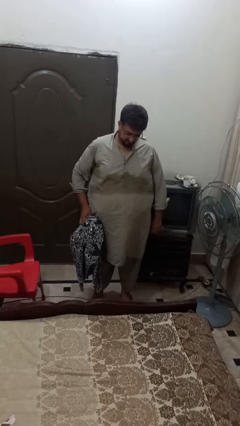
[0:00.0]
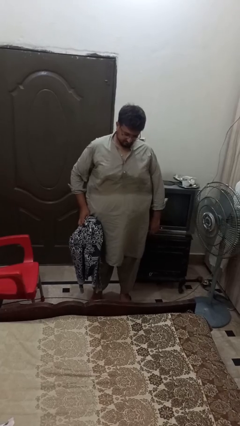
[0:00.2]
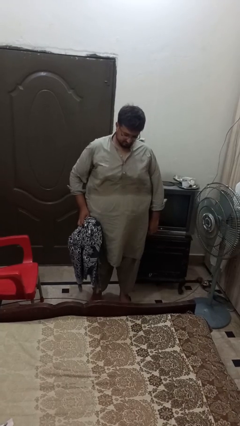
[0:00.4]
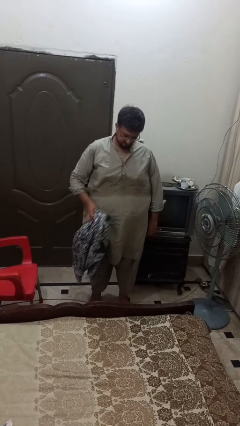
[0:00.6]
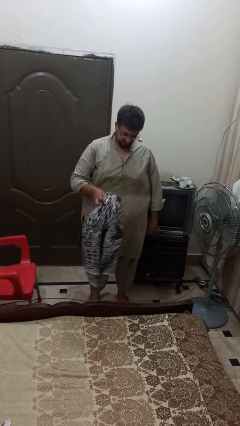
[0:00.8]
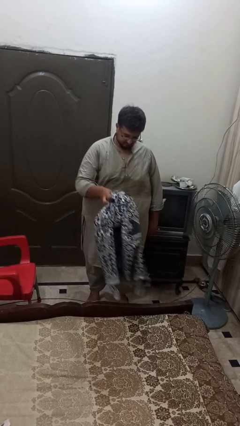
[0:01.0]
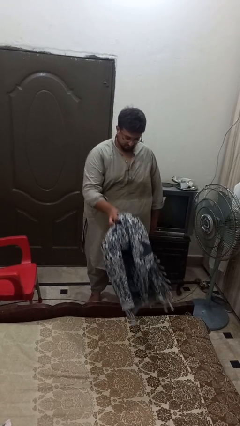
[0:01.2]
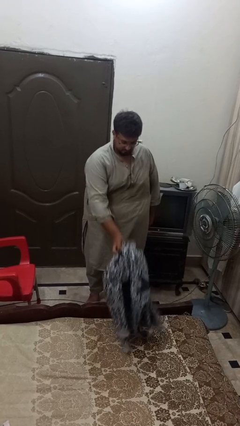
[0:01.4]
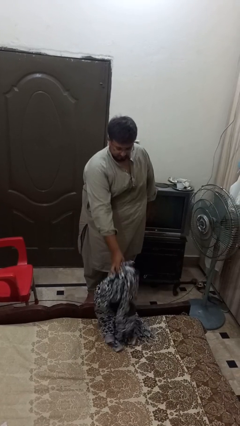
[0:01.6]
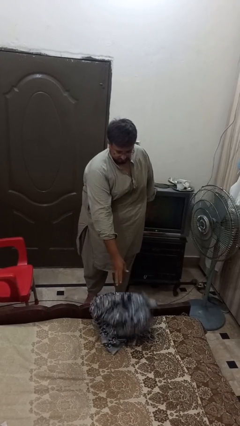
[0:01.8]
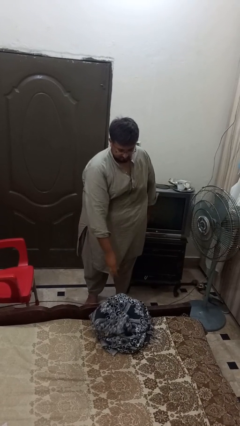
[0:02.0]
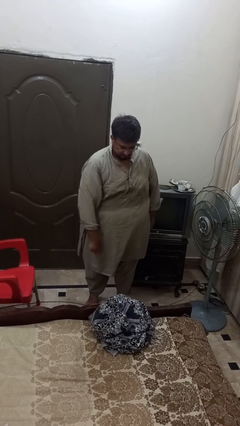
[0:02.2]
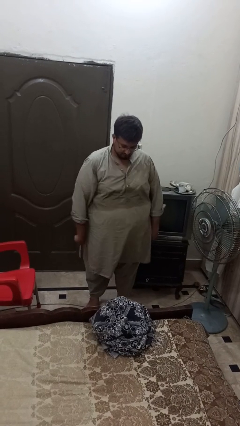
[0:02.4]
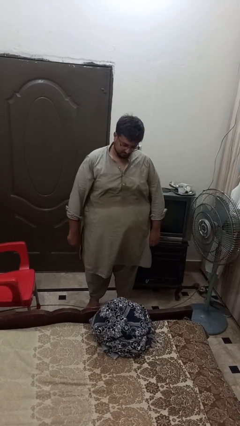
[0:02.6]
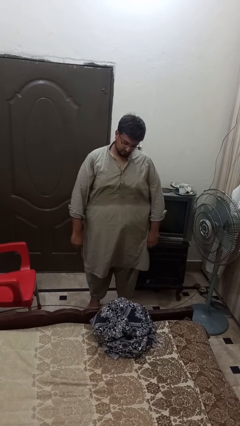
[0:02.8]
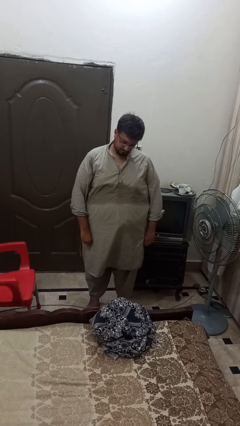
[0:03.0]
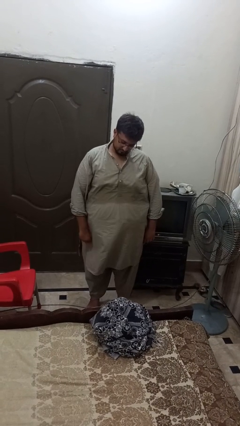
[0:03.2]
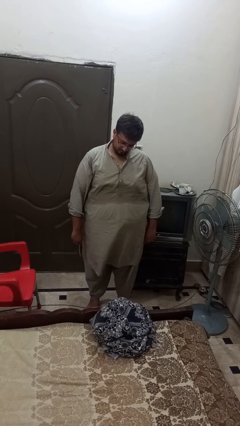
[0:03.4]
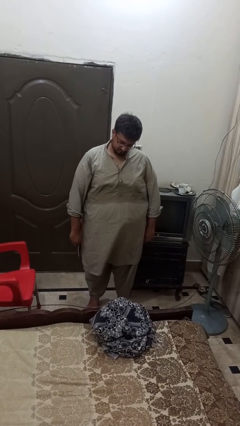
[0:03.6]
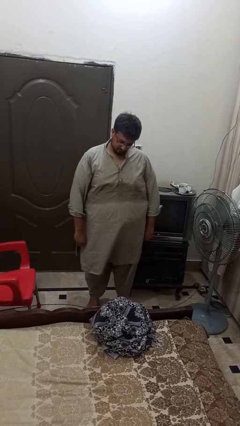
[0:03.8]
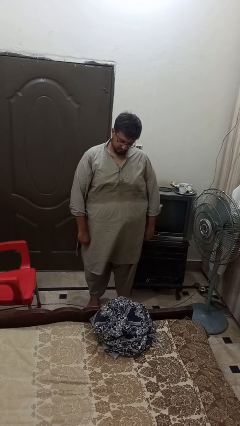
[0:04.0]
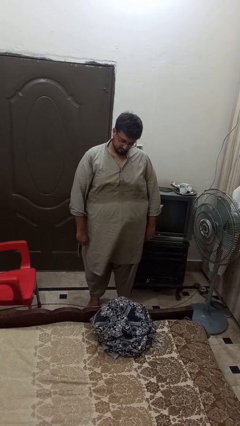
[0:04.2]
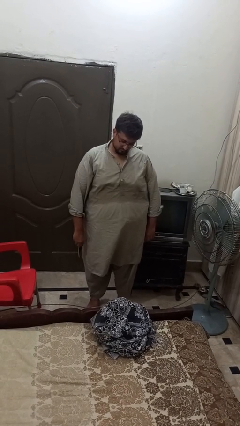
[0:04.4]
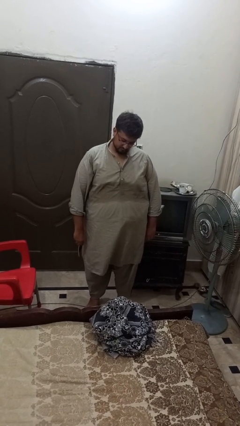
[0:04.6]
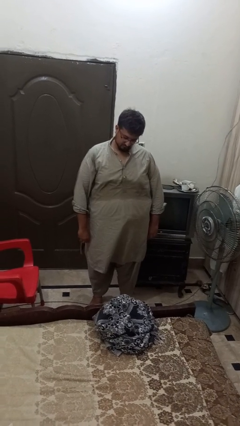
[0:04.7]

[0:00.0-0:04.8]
person puts down object on bed

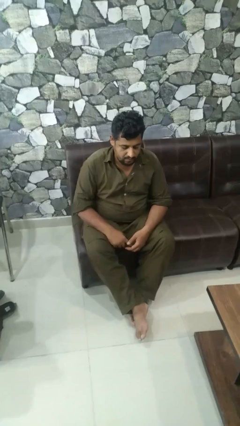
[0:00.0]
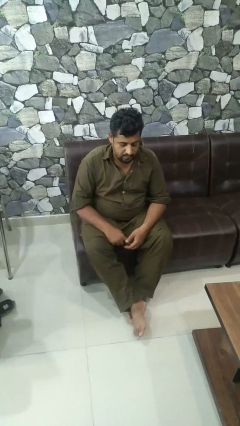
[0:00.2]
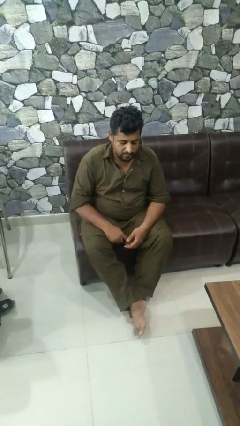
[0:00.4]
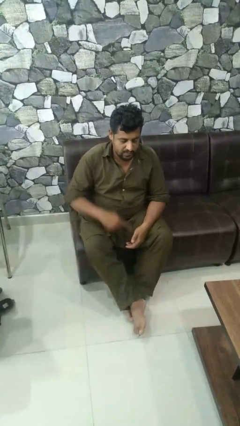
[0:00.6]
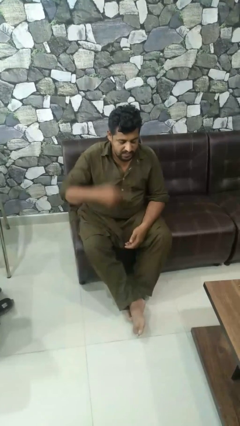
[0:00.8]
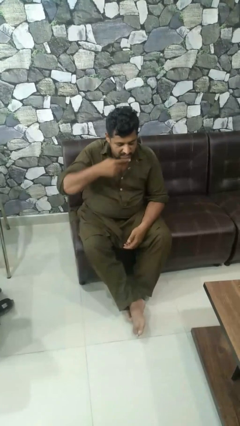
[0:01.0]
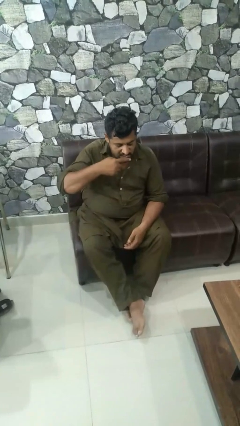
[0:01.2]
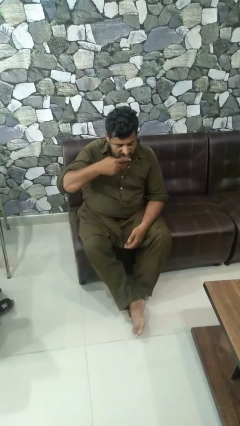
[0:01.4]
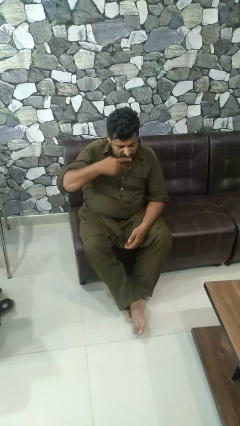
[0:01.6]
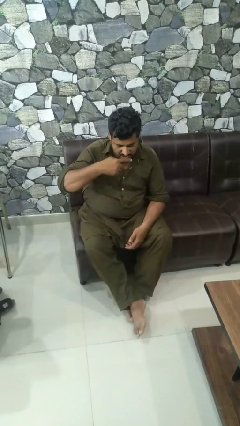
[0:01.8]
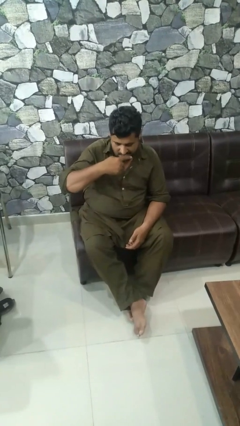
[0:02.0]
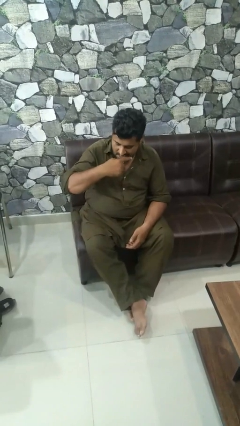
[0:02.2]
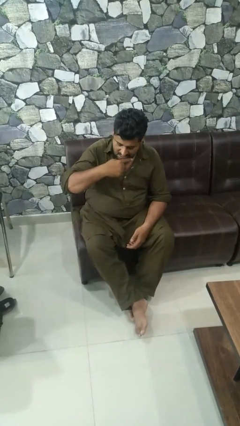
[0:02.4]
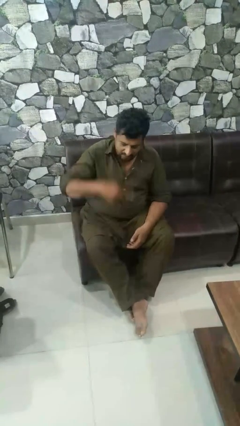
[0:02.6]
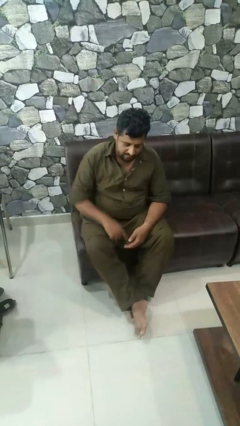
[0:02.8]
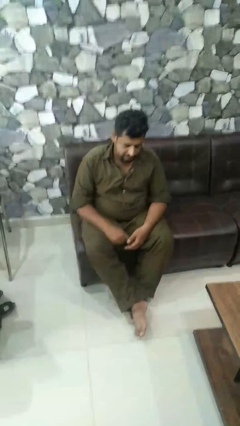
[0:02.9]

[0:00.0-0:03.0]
person brushes teeth

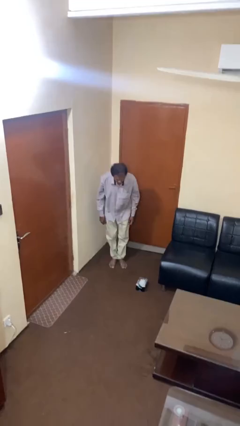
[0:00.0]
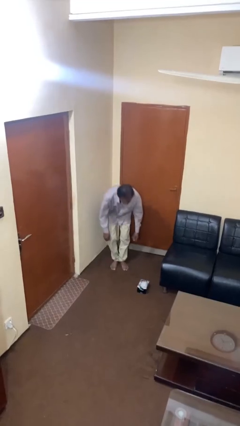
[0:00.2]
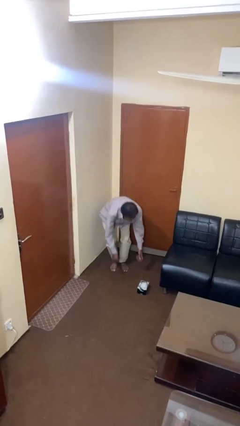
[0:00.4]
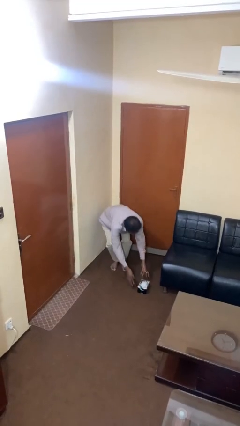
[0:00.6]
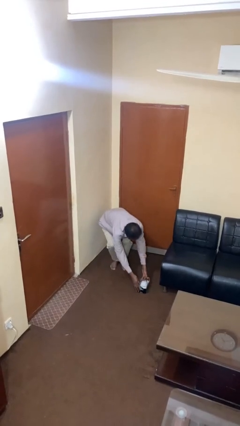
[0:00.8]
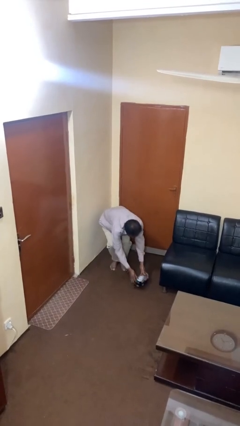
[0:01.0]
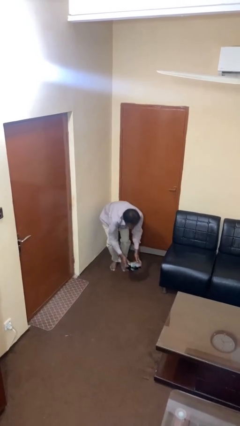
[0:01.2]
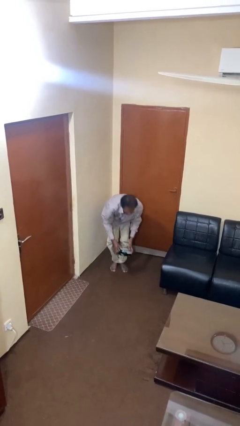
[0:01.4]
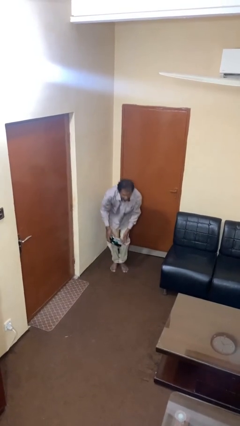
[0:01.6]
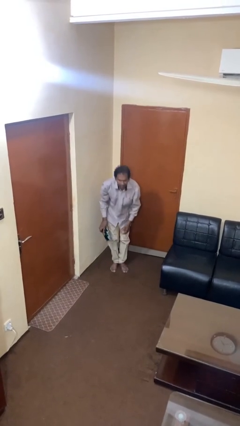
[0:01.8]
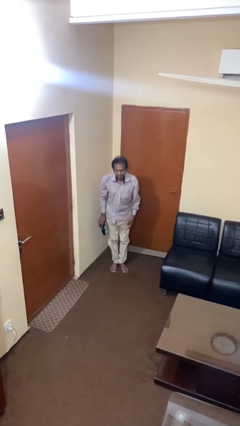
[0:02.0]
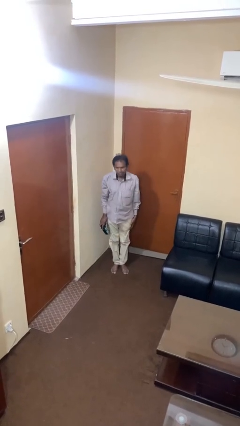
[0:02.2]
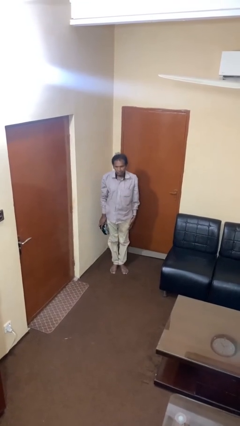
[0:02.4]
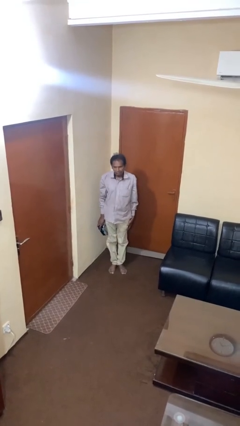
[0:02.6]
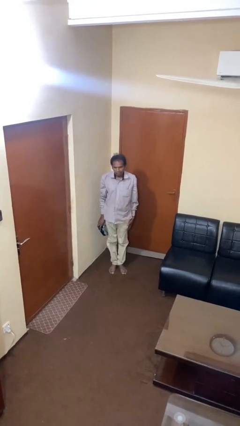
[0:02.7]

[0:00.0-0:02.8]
person picks up object from floor

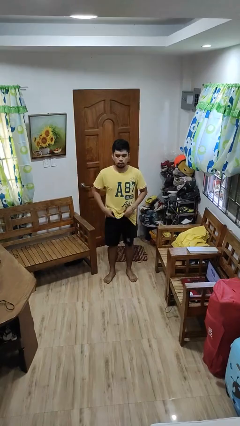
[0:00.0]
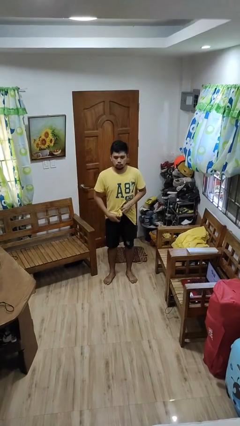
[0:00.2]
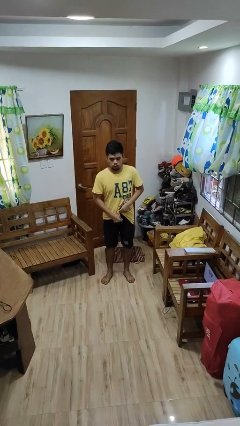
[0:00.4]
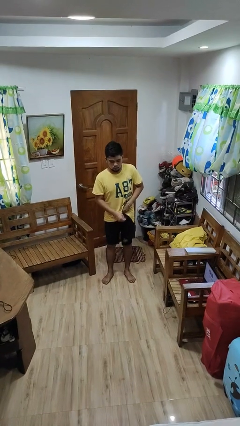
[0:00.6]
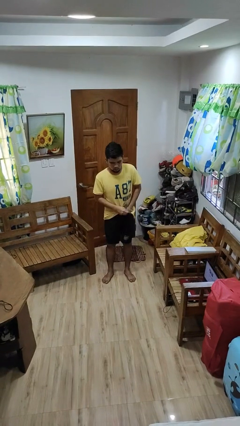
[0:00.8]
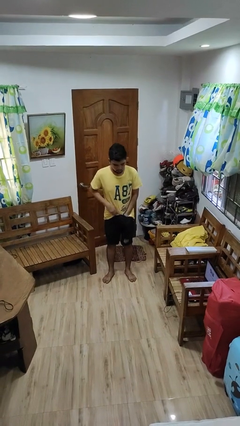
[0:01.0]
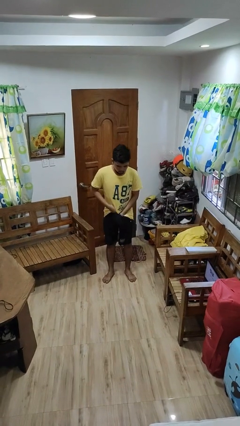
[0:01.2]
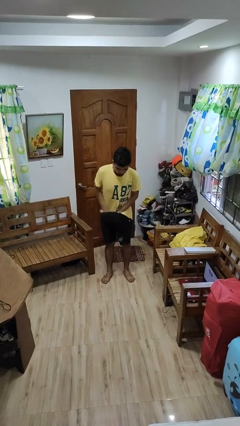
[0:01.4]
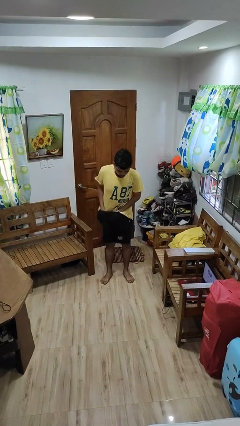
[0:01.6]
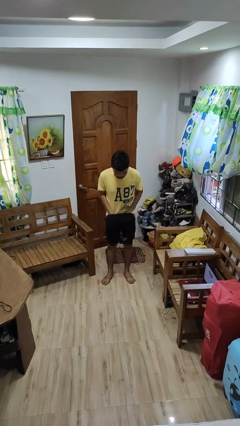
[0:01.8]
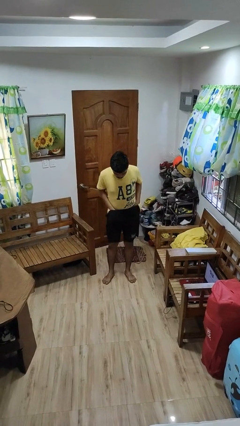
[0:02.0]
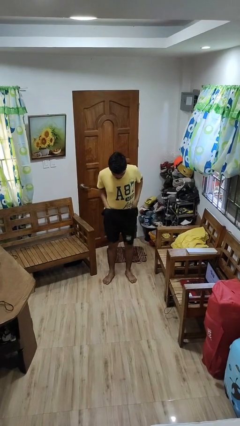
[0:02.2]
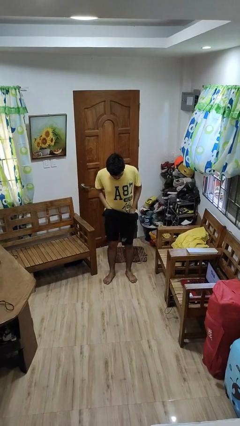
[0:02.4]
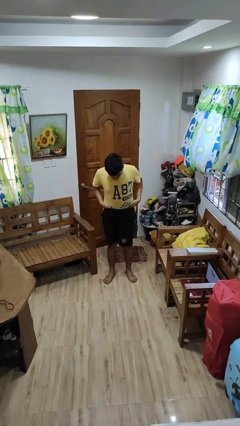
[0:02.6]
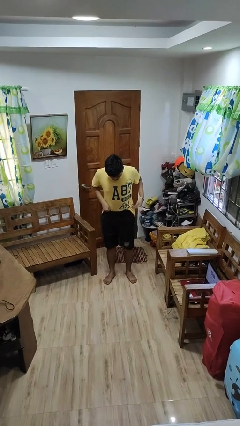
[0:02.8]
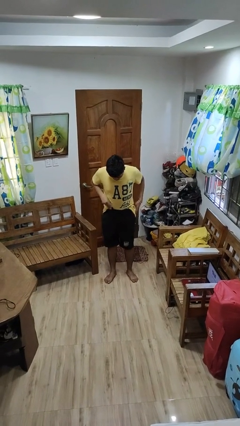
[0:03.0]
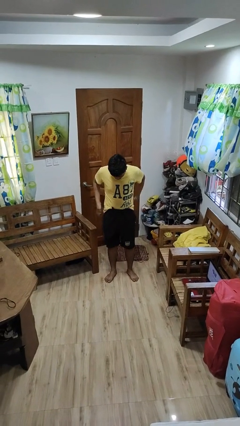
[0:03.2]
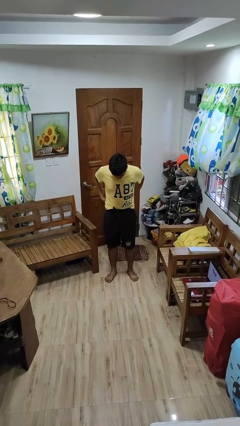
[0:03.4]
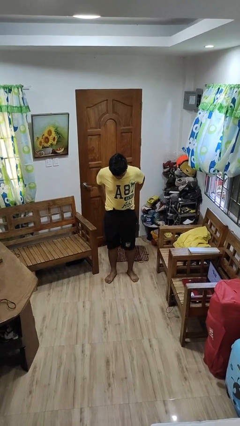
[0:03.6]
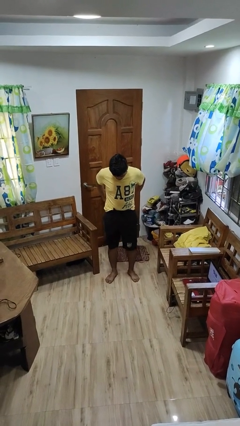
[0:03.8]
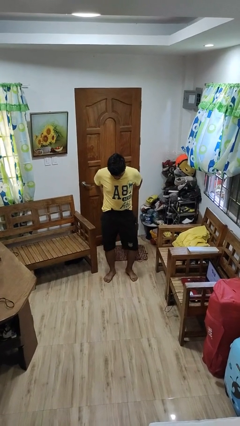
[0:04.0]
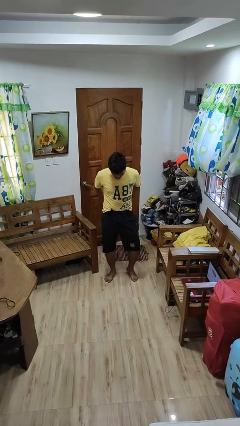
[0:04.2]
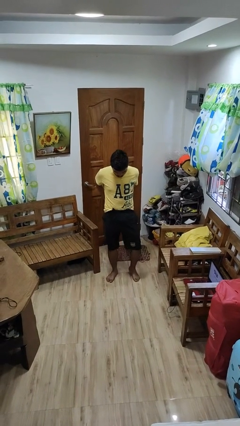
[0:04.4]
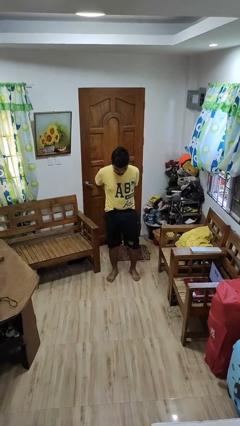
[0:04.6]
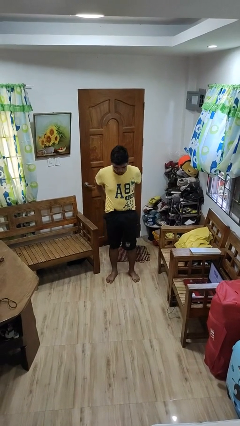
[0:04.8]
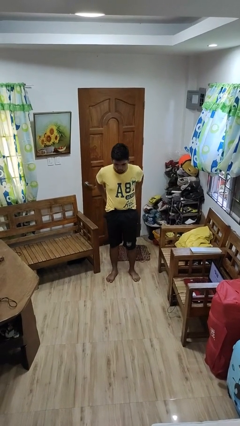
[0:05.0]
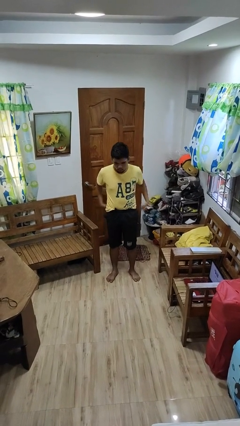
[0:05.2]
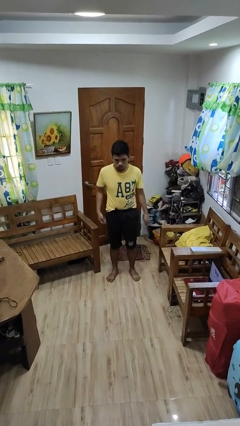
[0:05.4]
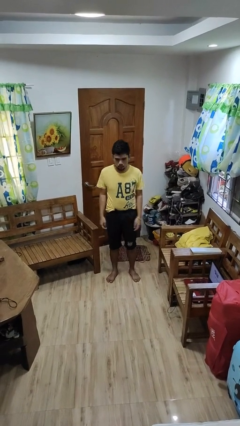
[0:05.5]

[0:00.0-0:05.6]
person tucks in shirt

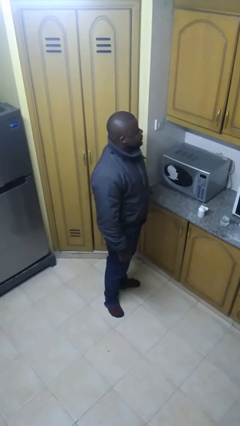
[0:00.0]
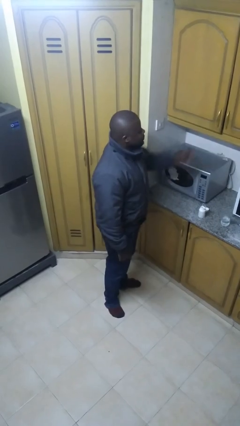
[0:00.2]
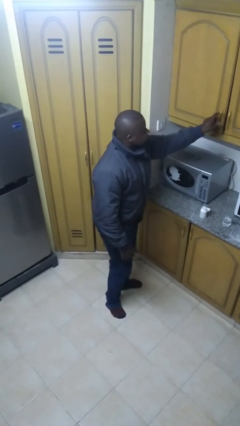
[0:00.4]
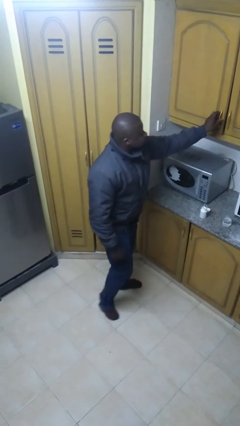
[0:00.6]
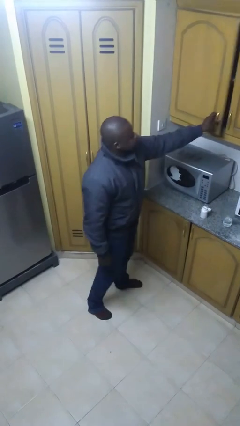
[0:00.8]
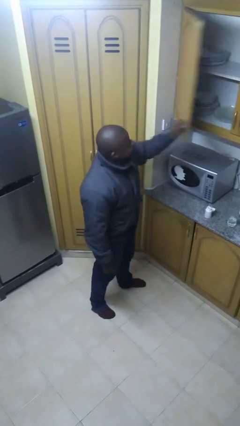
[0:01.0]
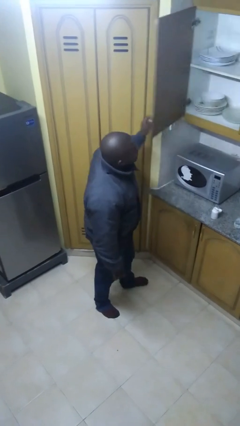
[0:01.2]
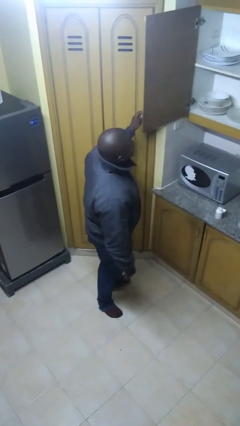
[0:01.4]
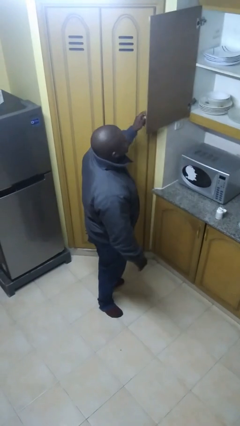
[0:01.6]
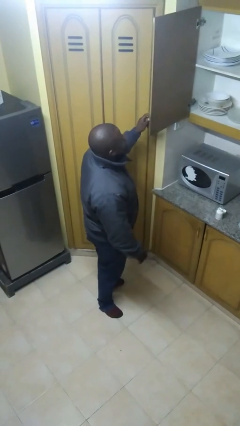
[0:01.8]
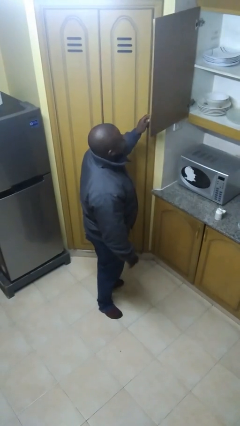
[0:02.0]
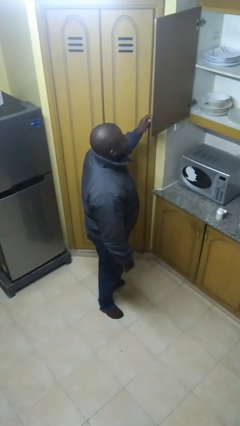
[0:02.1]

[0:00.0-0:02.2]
person closes cabinet
